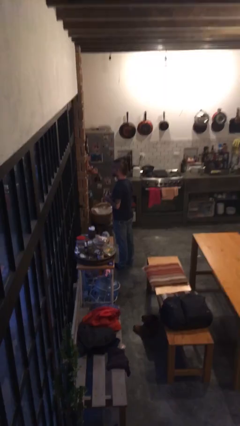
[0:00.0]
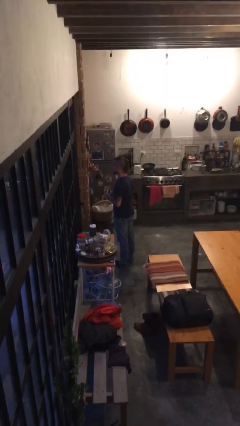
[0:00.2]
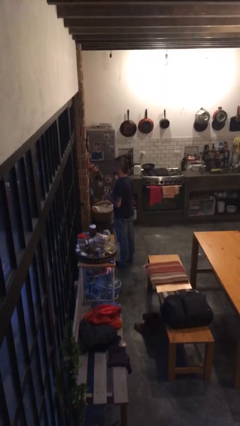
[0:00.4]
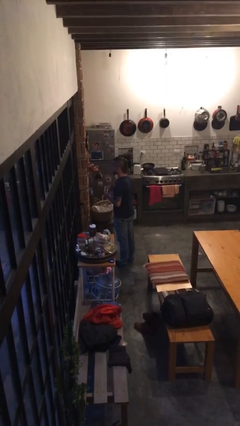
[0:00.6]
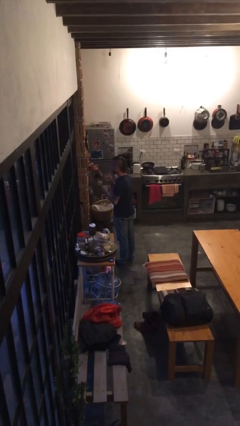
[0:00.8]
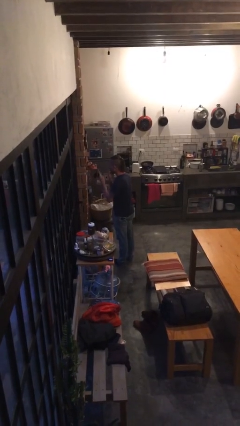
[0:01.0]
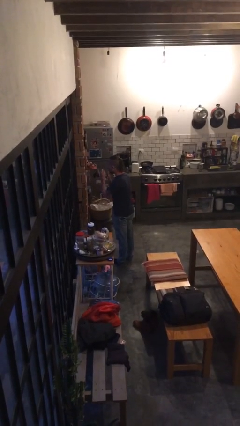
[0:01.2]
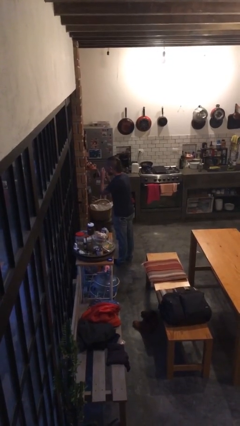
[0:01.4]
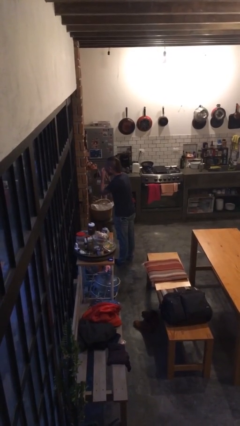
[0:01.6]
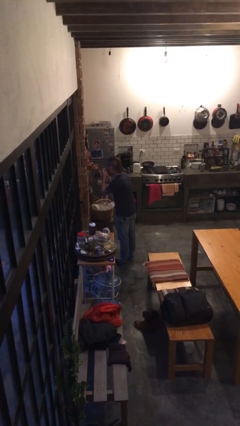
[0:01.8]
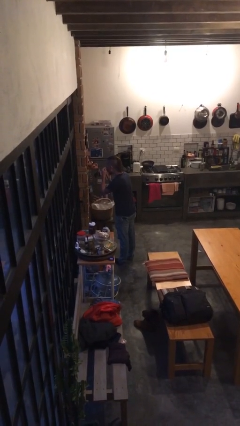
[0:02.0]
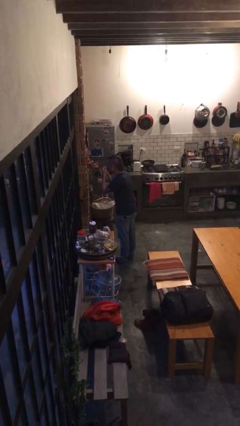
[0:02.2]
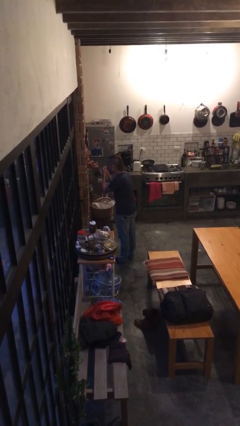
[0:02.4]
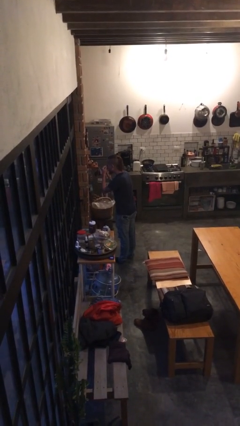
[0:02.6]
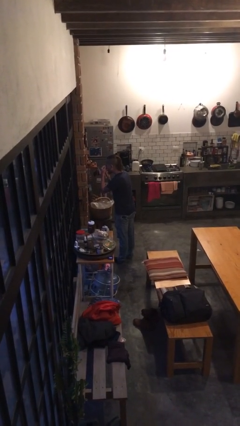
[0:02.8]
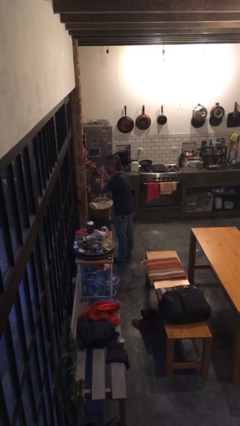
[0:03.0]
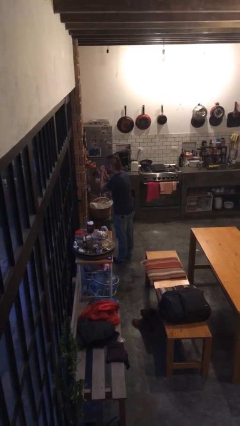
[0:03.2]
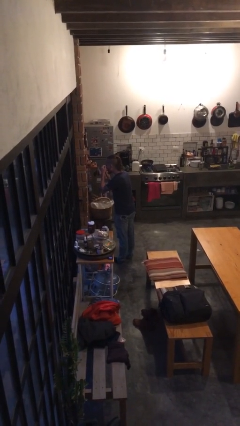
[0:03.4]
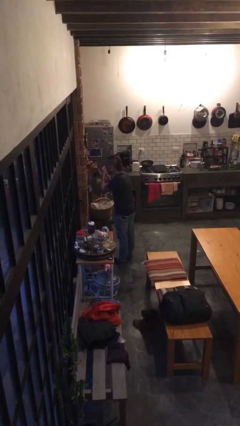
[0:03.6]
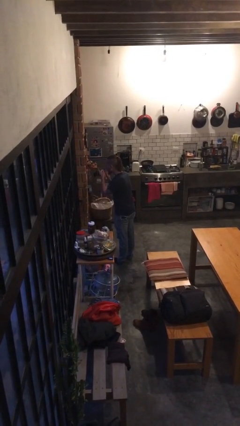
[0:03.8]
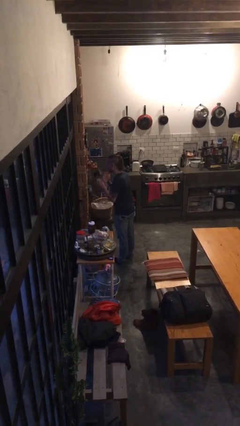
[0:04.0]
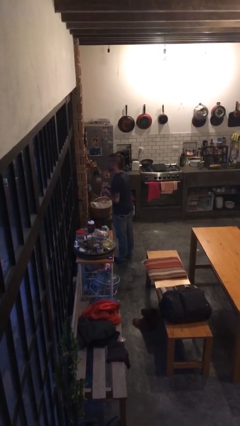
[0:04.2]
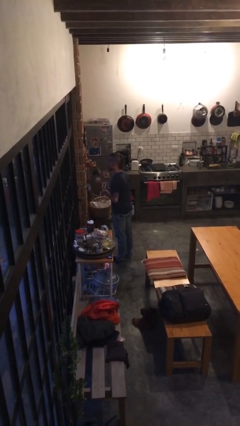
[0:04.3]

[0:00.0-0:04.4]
person applies eye makeup

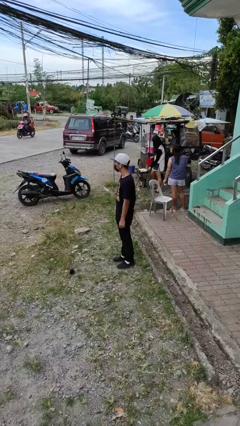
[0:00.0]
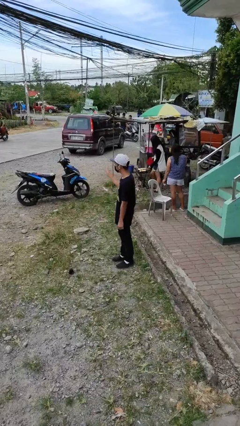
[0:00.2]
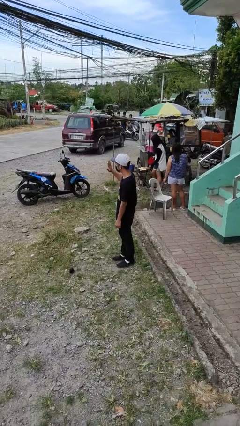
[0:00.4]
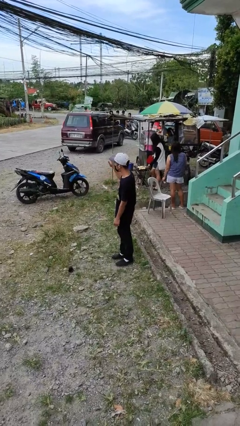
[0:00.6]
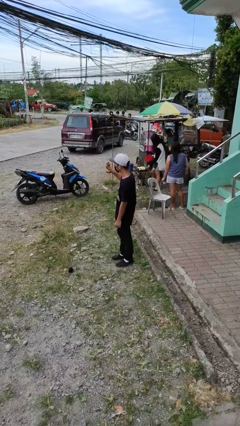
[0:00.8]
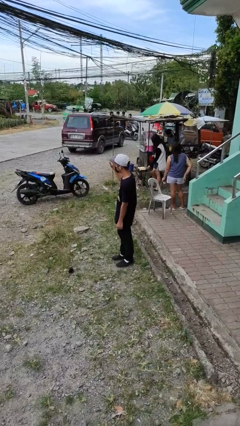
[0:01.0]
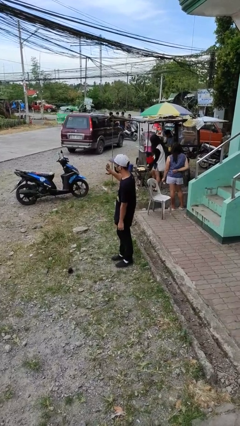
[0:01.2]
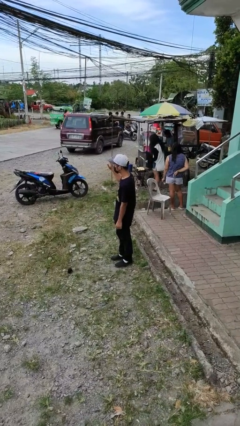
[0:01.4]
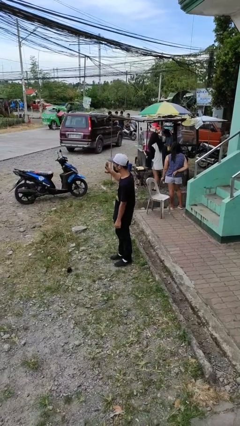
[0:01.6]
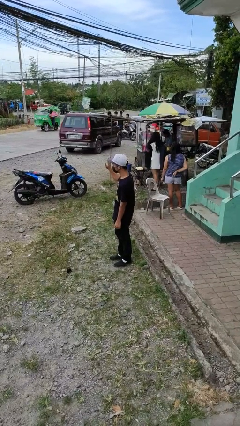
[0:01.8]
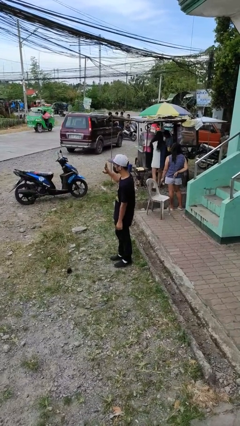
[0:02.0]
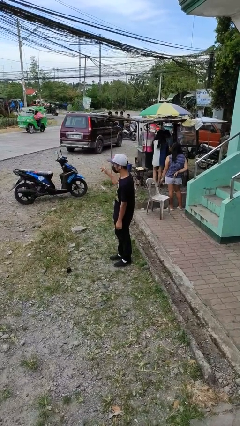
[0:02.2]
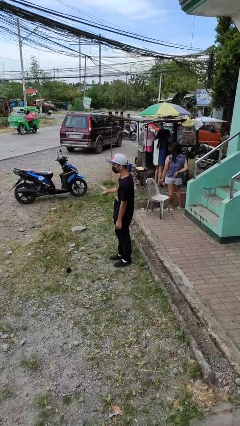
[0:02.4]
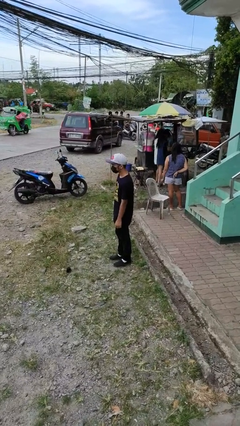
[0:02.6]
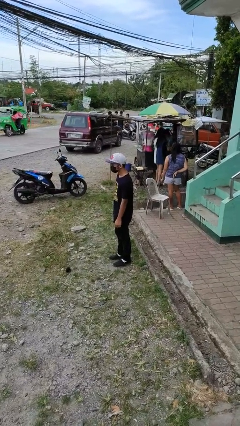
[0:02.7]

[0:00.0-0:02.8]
person waves at person

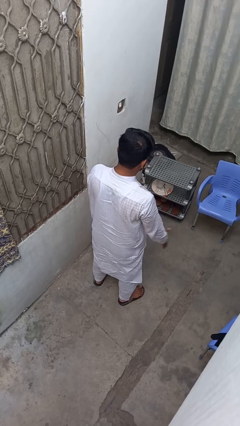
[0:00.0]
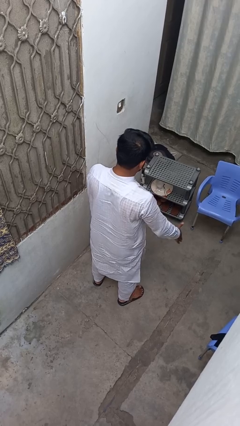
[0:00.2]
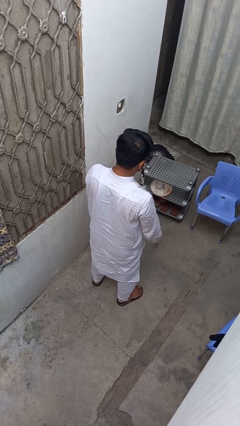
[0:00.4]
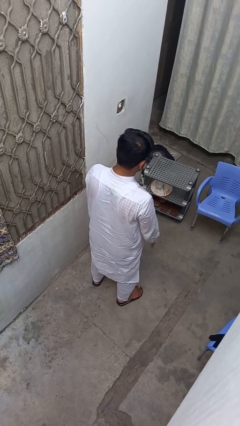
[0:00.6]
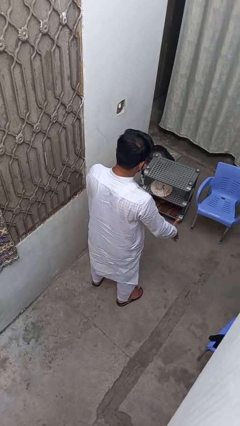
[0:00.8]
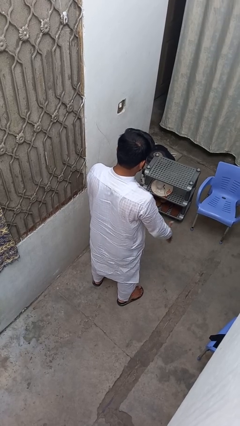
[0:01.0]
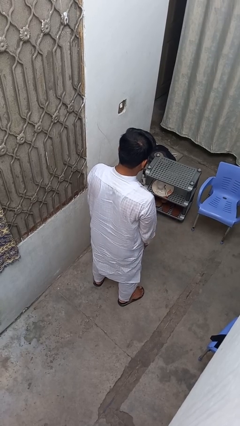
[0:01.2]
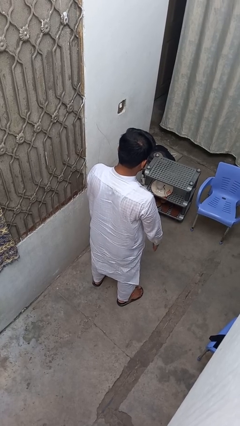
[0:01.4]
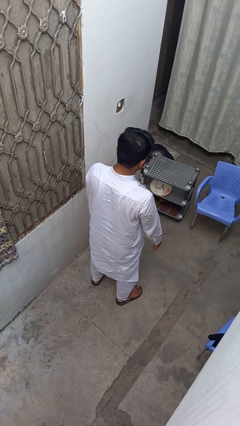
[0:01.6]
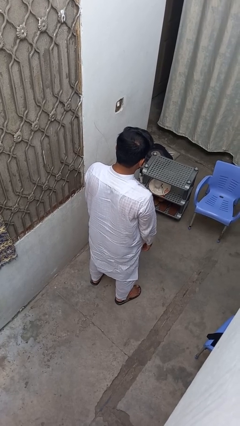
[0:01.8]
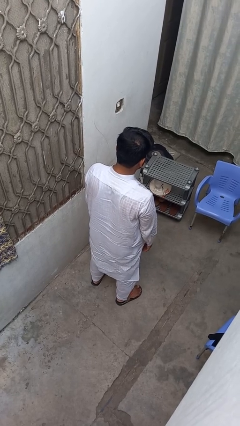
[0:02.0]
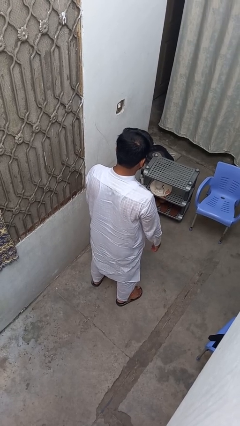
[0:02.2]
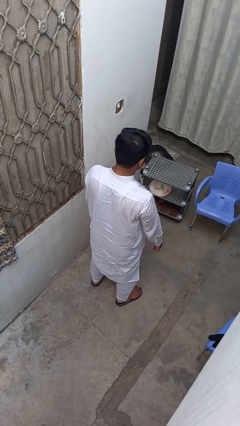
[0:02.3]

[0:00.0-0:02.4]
person slaps hands on thighs

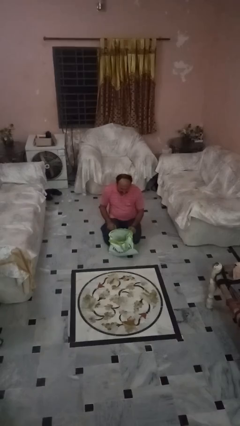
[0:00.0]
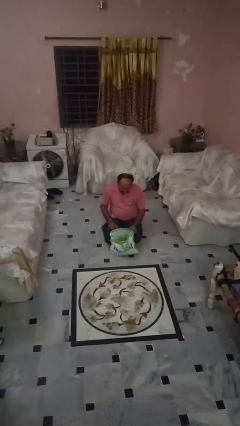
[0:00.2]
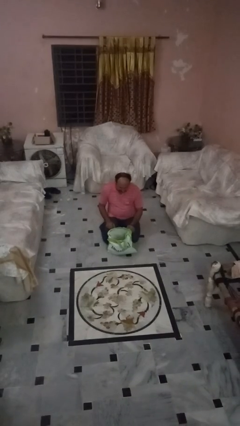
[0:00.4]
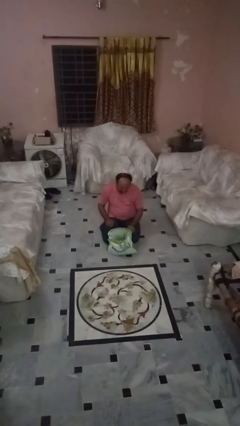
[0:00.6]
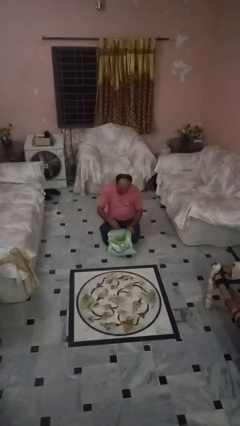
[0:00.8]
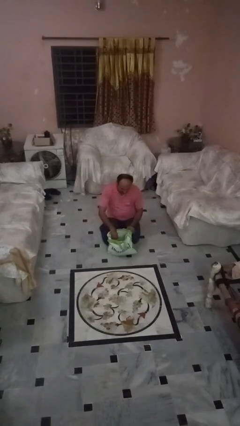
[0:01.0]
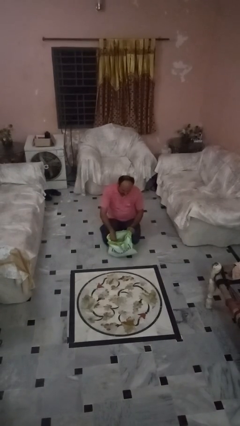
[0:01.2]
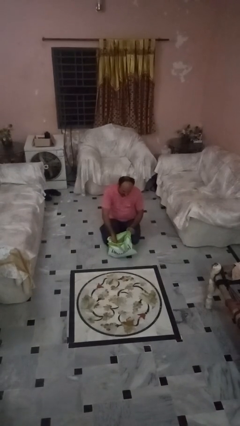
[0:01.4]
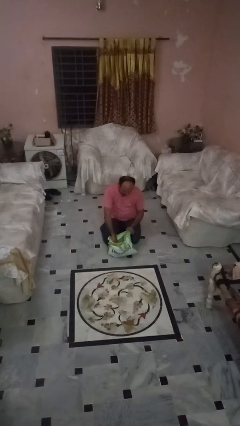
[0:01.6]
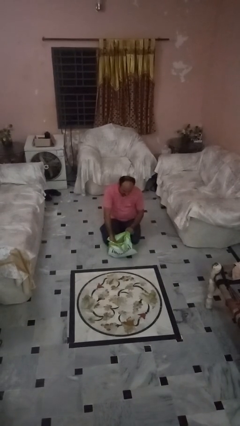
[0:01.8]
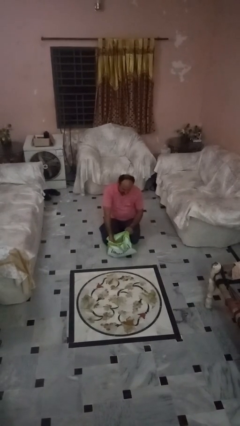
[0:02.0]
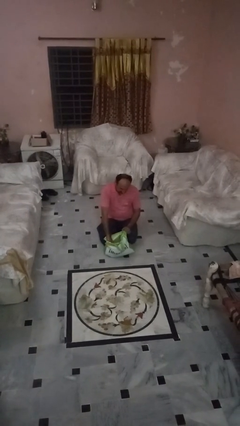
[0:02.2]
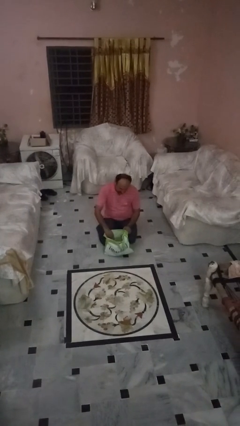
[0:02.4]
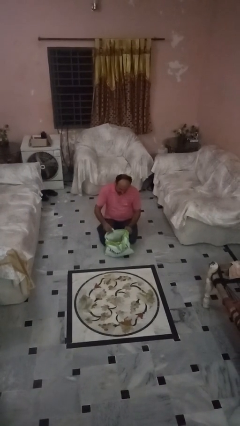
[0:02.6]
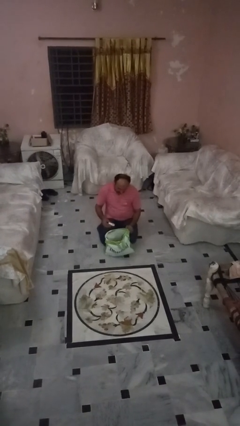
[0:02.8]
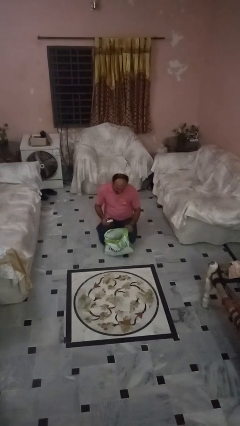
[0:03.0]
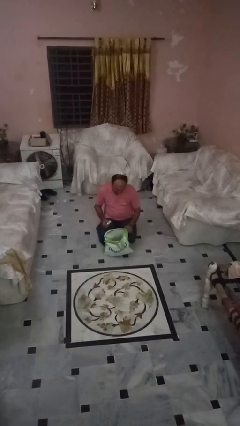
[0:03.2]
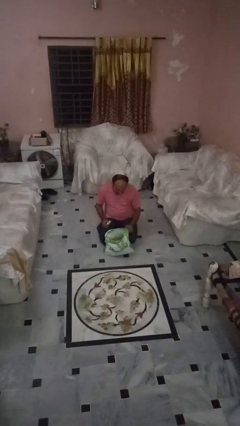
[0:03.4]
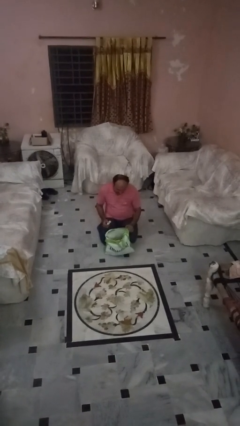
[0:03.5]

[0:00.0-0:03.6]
person takes object from bag

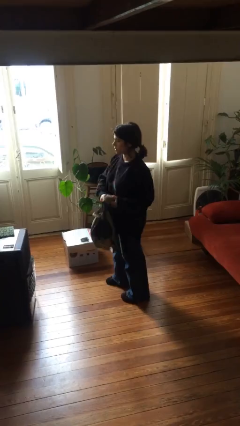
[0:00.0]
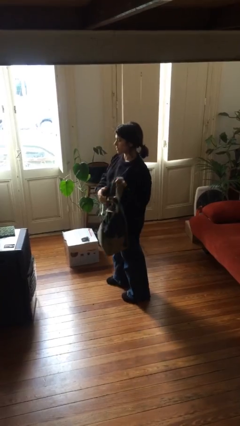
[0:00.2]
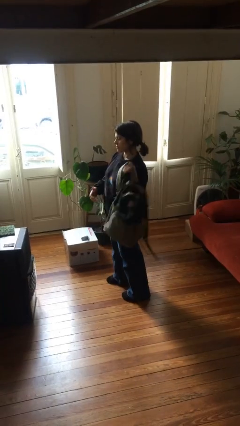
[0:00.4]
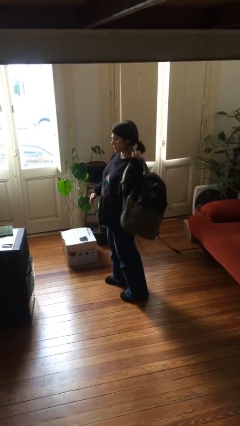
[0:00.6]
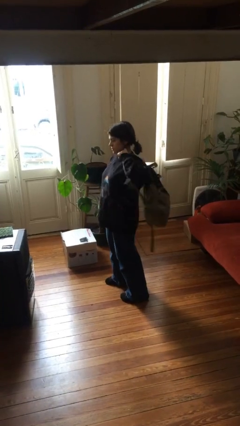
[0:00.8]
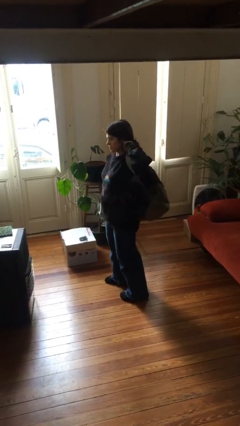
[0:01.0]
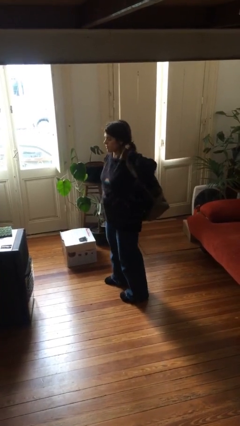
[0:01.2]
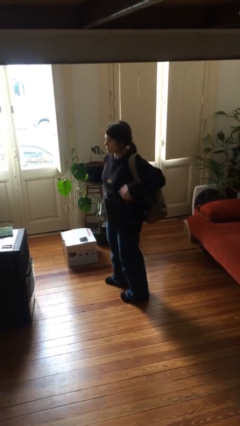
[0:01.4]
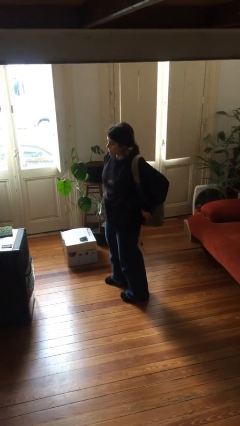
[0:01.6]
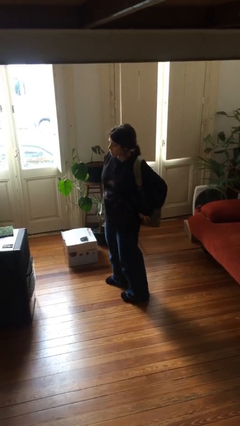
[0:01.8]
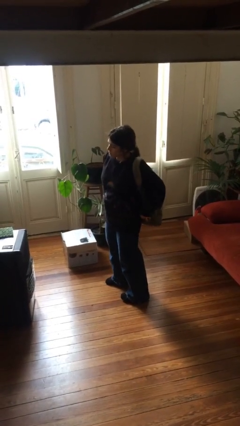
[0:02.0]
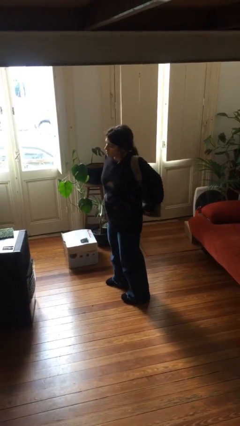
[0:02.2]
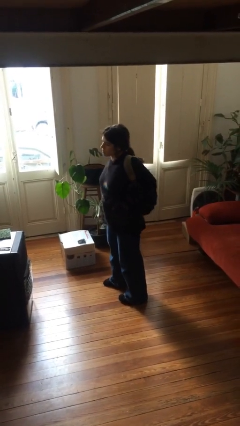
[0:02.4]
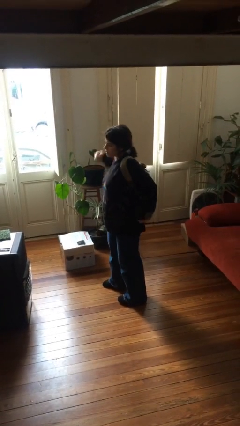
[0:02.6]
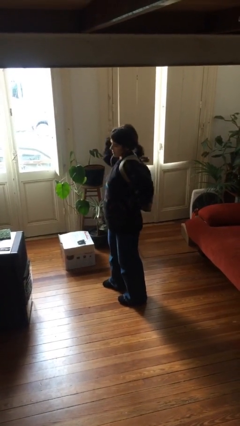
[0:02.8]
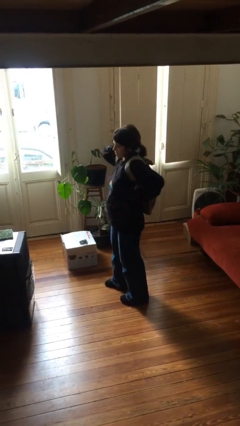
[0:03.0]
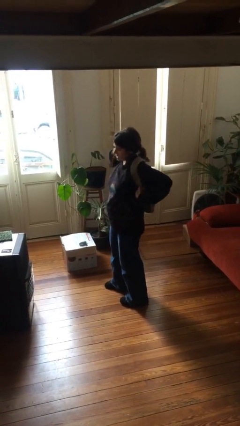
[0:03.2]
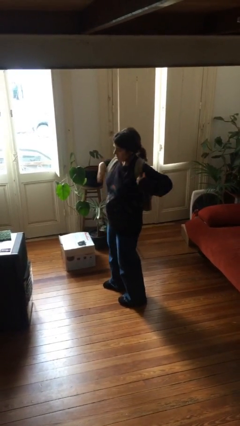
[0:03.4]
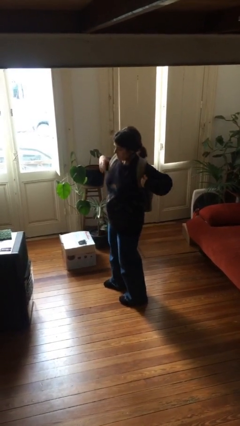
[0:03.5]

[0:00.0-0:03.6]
person puts on backpack

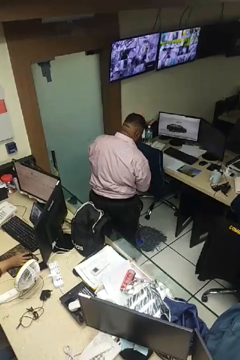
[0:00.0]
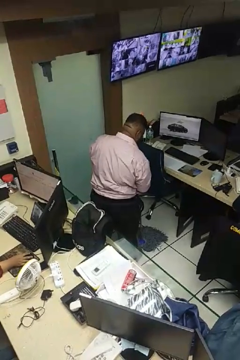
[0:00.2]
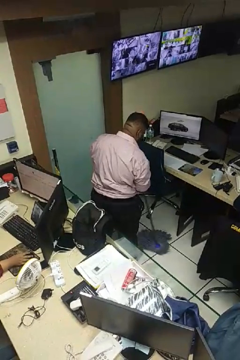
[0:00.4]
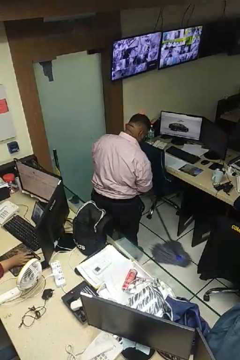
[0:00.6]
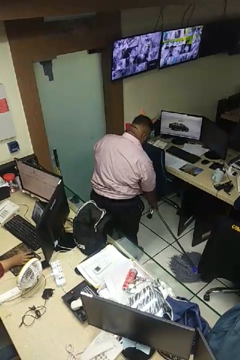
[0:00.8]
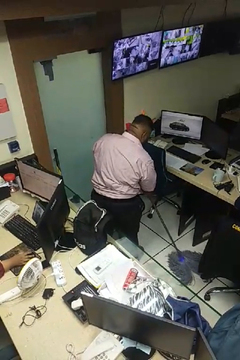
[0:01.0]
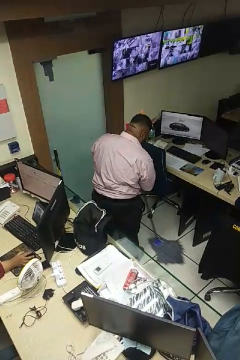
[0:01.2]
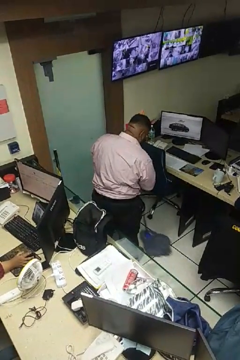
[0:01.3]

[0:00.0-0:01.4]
person mops
